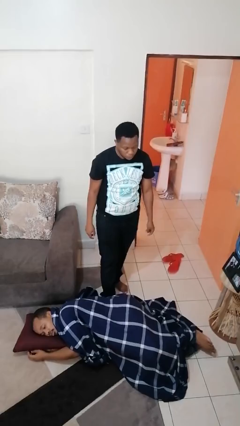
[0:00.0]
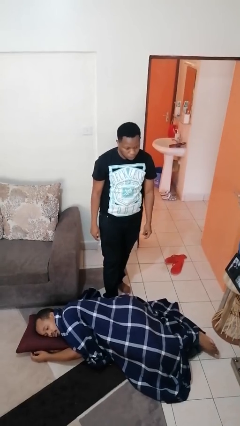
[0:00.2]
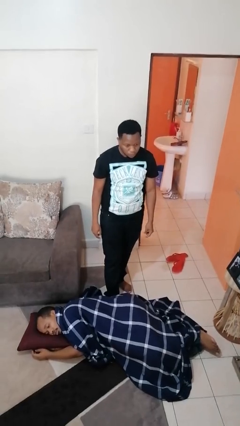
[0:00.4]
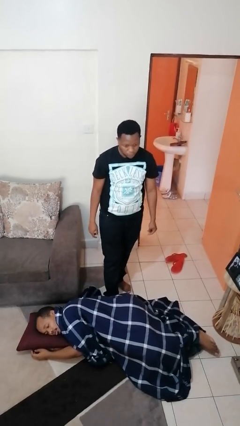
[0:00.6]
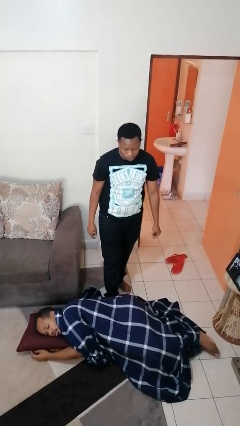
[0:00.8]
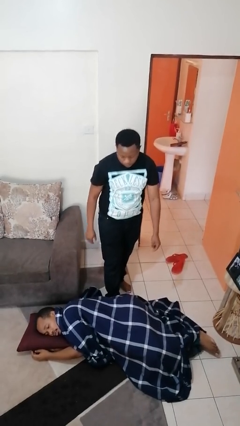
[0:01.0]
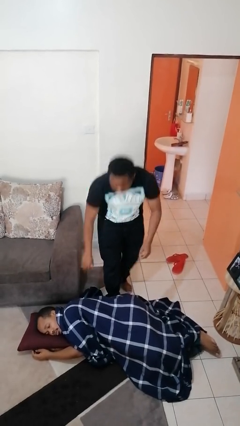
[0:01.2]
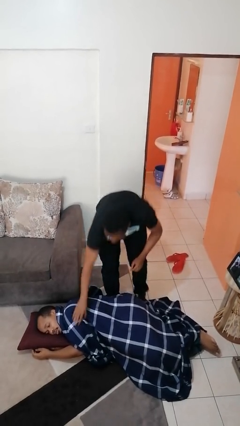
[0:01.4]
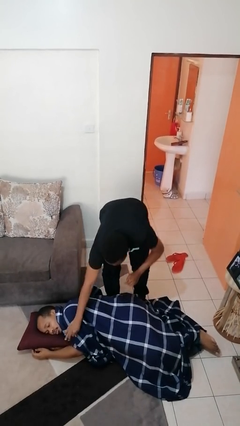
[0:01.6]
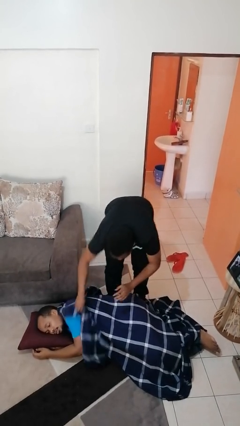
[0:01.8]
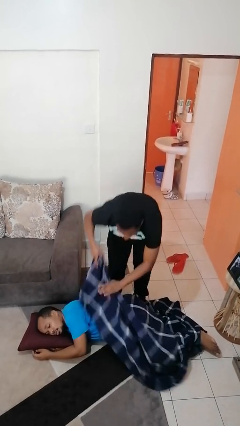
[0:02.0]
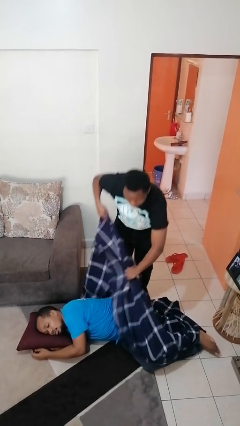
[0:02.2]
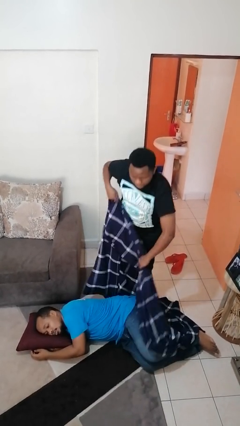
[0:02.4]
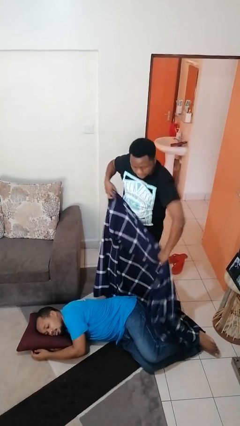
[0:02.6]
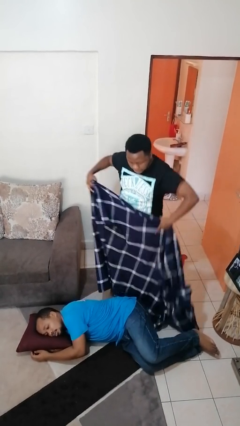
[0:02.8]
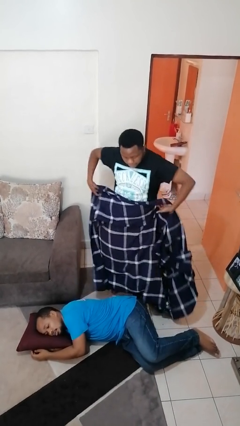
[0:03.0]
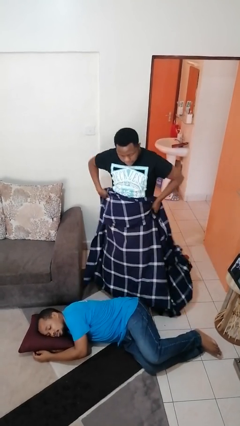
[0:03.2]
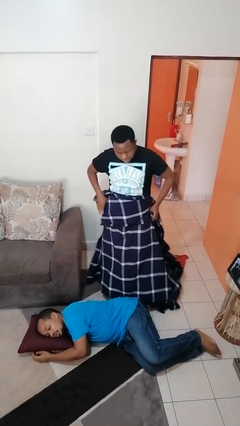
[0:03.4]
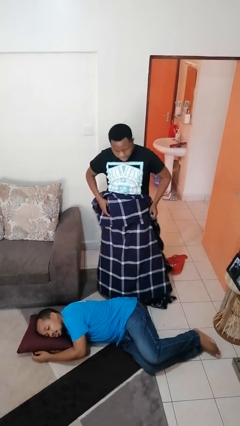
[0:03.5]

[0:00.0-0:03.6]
person uncovers friend with blanket

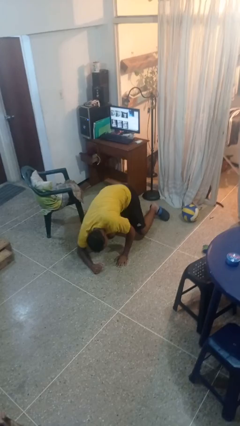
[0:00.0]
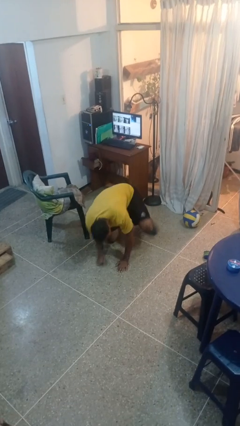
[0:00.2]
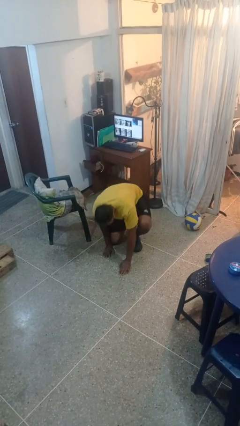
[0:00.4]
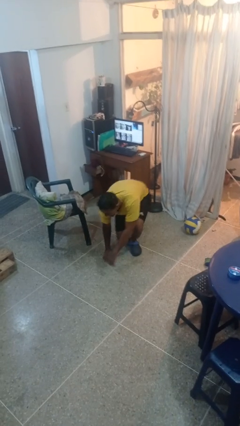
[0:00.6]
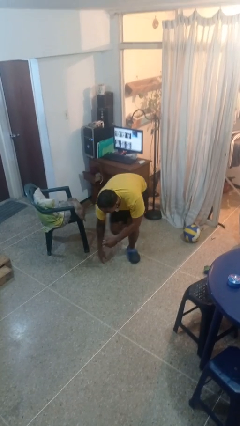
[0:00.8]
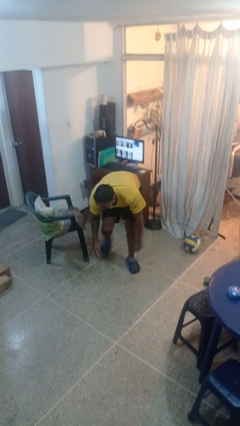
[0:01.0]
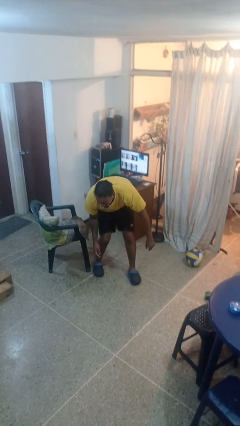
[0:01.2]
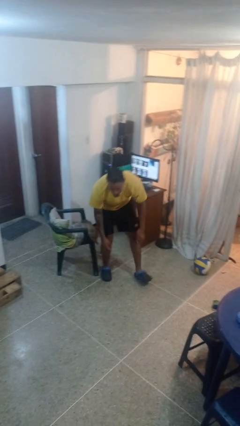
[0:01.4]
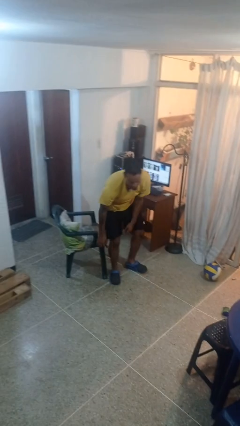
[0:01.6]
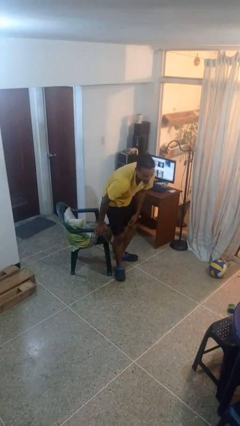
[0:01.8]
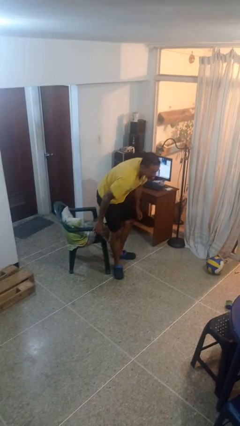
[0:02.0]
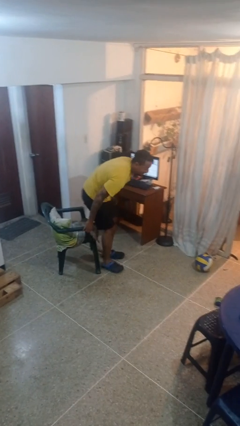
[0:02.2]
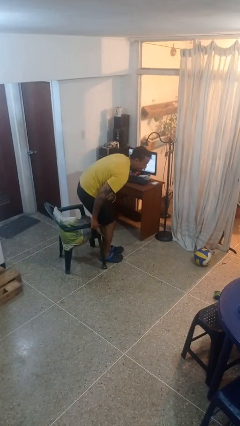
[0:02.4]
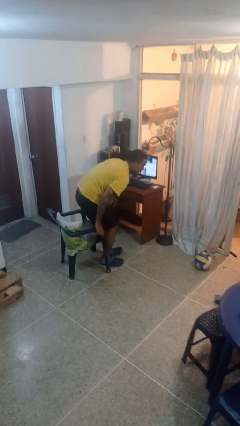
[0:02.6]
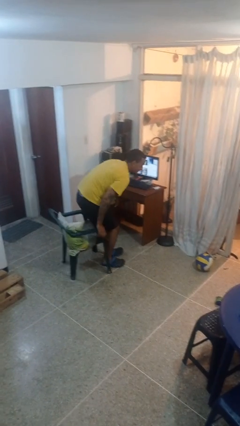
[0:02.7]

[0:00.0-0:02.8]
person stands up from floor

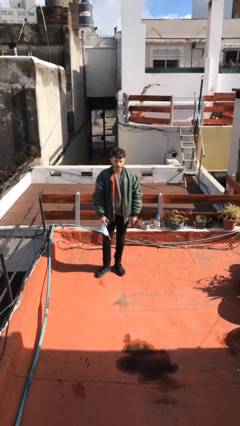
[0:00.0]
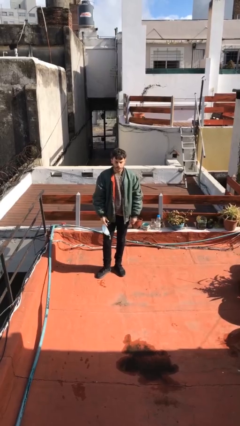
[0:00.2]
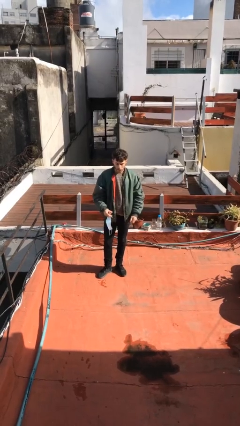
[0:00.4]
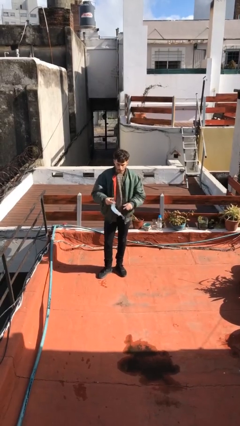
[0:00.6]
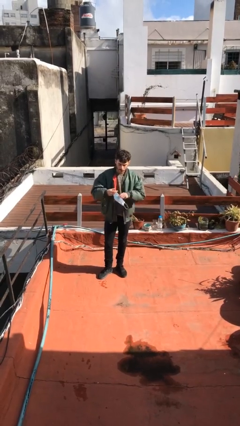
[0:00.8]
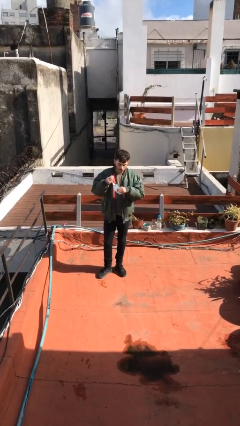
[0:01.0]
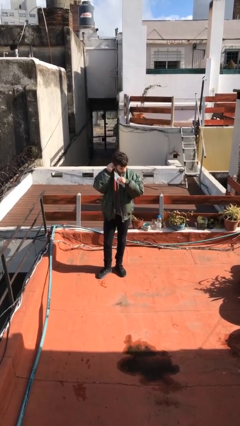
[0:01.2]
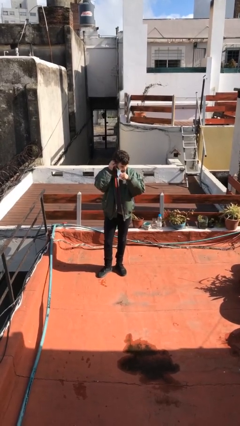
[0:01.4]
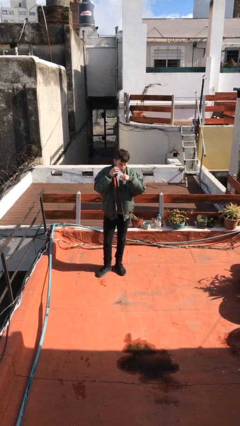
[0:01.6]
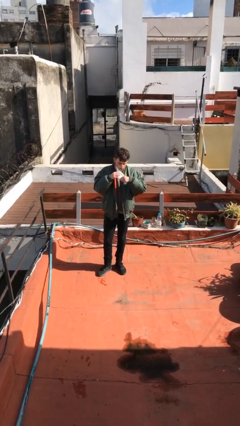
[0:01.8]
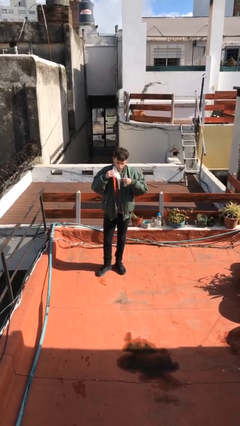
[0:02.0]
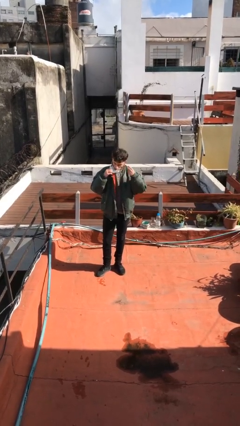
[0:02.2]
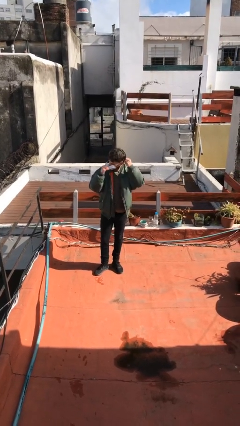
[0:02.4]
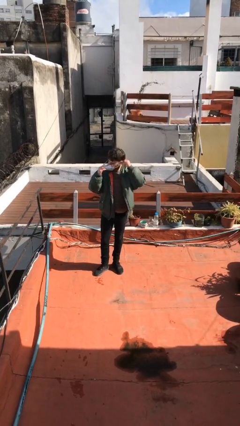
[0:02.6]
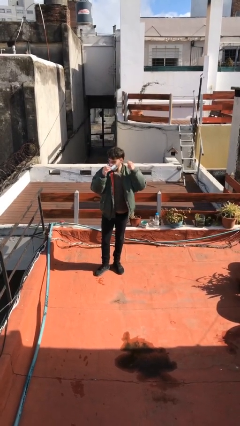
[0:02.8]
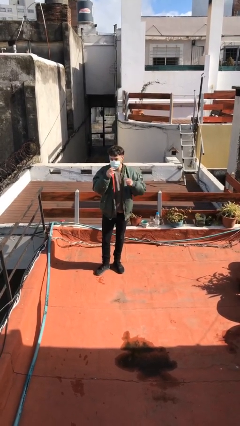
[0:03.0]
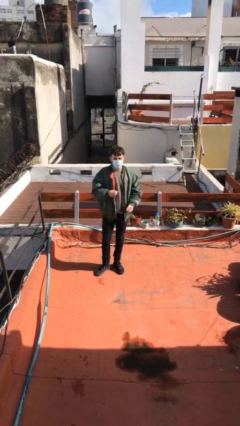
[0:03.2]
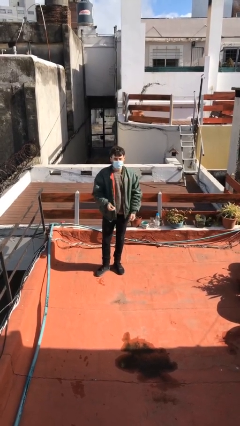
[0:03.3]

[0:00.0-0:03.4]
person puts on facemask

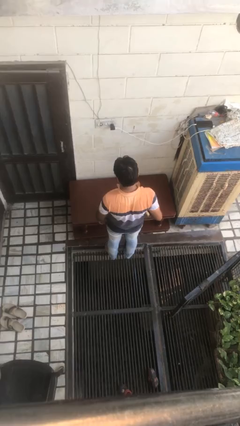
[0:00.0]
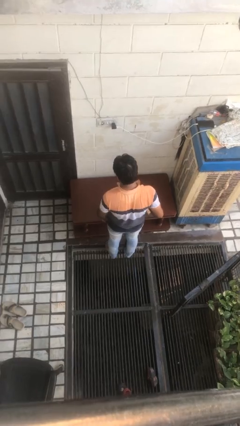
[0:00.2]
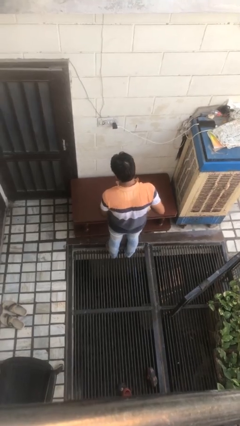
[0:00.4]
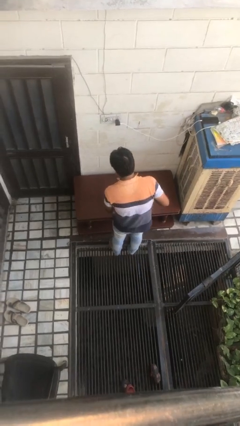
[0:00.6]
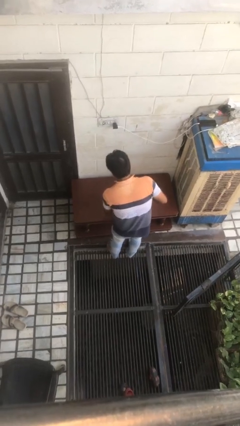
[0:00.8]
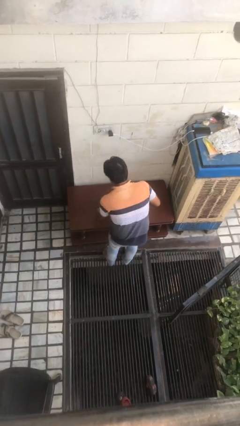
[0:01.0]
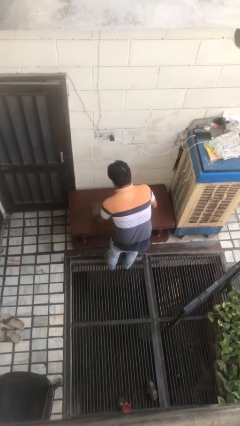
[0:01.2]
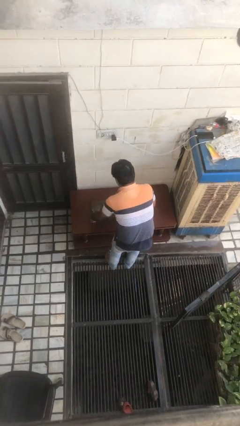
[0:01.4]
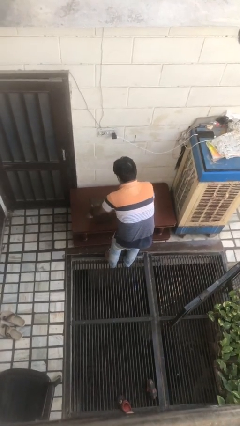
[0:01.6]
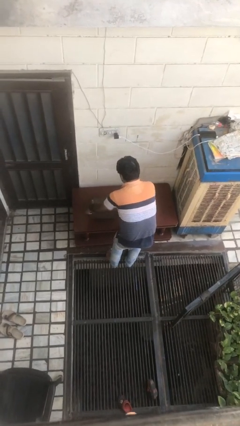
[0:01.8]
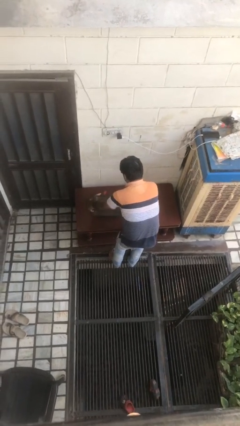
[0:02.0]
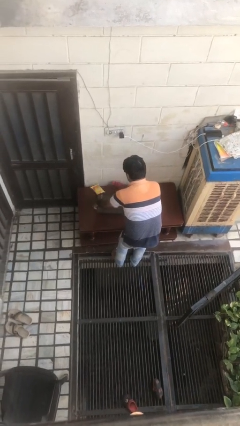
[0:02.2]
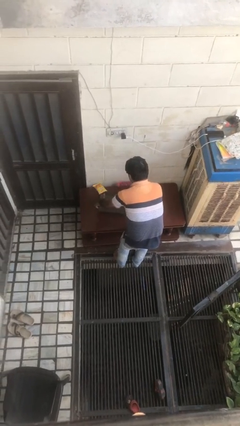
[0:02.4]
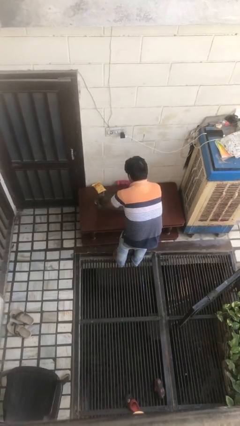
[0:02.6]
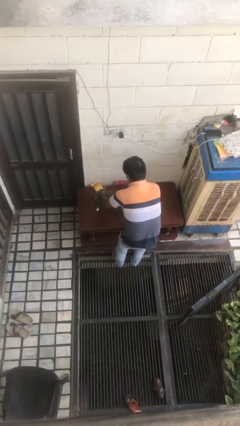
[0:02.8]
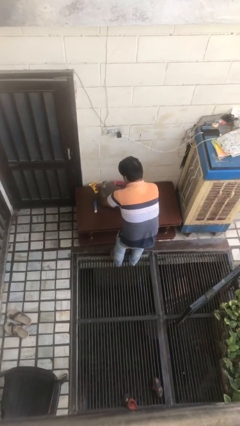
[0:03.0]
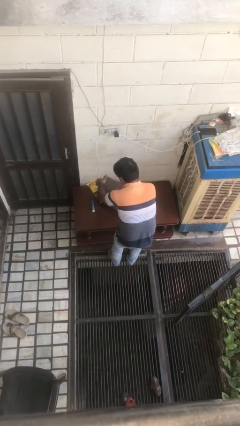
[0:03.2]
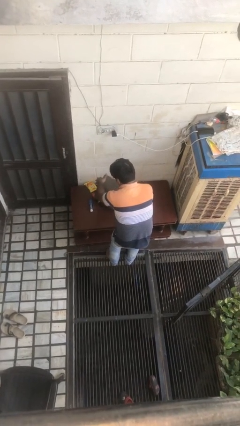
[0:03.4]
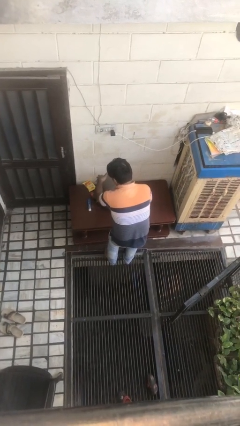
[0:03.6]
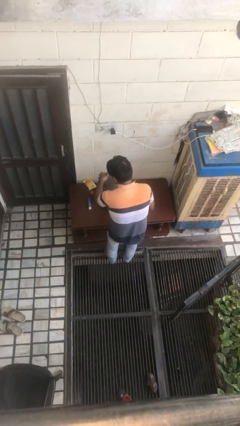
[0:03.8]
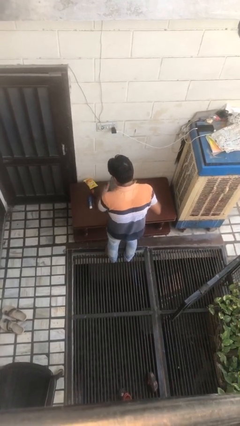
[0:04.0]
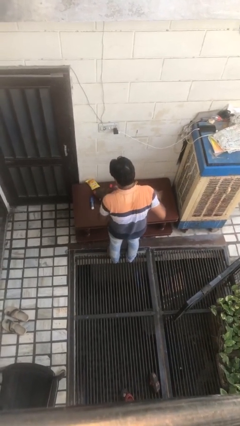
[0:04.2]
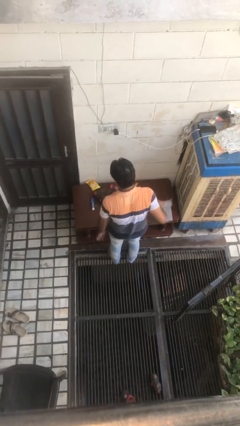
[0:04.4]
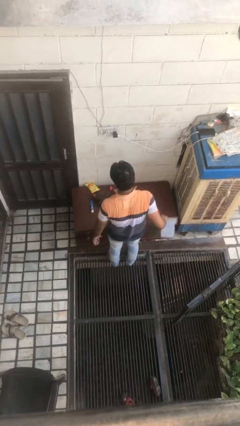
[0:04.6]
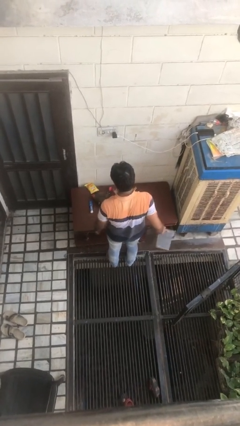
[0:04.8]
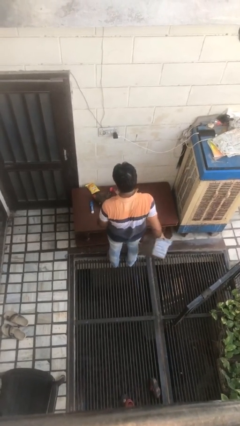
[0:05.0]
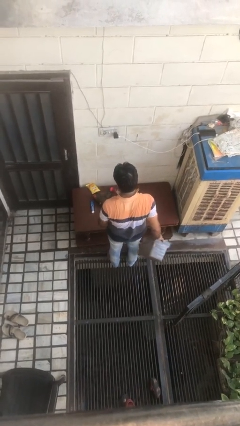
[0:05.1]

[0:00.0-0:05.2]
person unloads box onto table

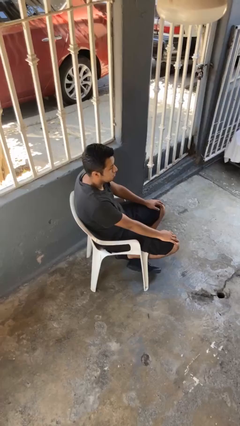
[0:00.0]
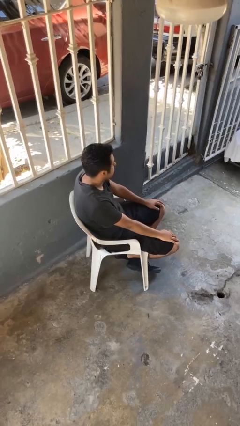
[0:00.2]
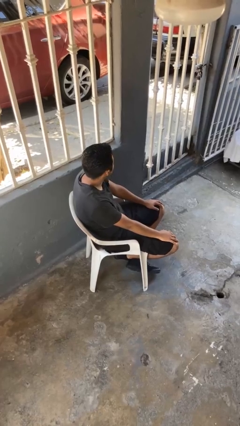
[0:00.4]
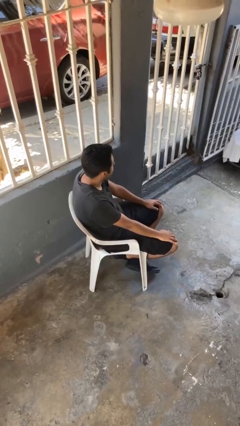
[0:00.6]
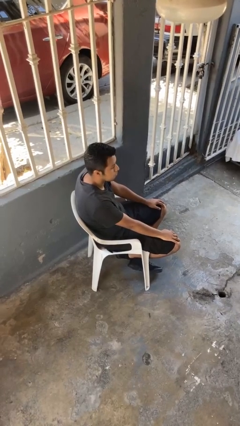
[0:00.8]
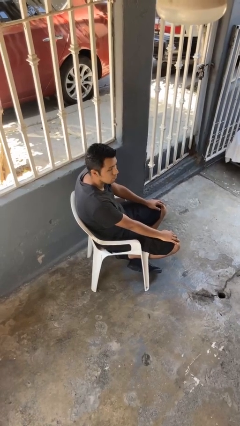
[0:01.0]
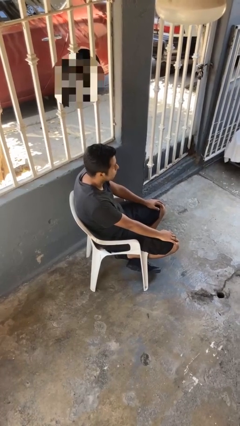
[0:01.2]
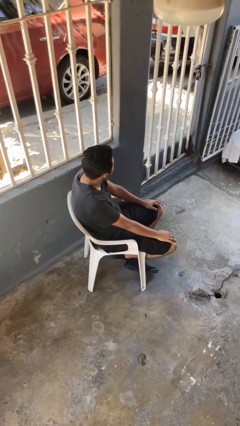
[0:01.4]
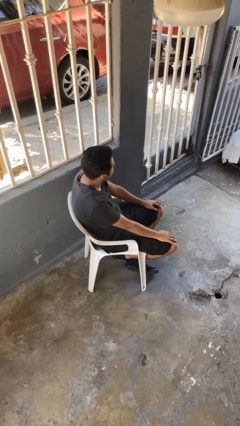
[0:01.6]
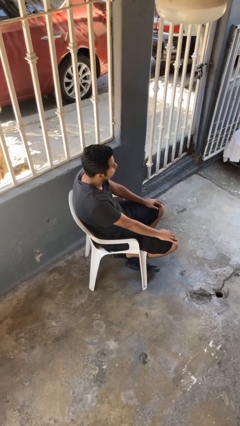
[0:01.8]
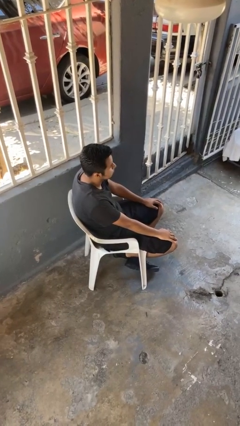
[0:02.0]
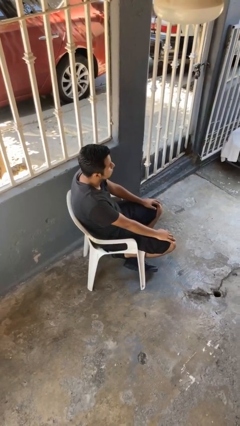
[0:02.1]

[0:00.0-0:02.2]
person shakes head

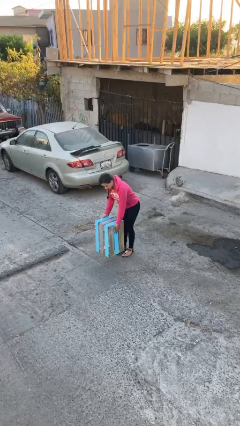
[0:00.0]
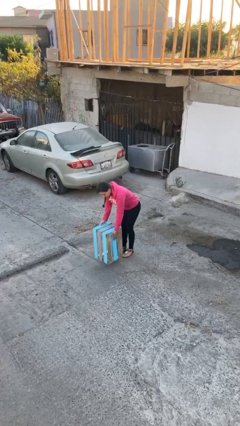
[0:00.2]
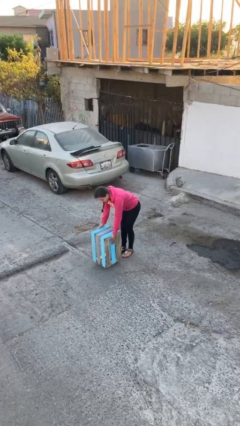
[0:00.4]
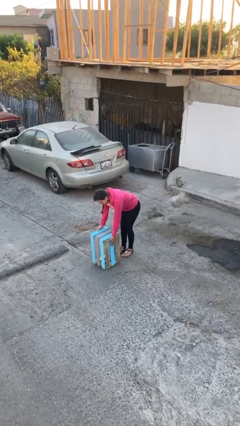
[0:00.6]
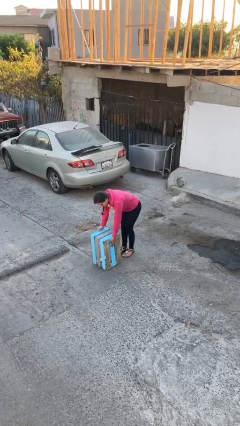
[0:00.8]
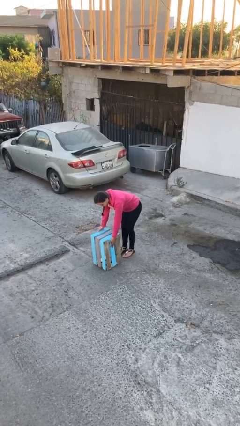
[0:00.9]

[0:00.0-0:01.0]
person puts down object on floor
